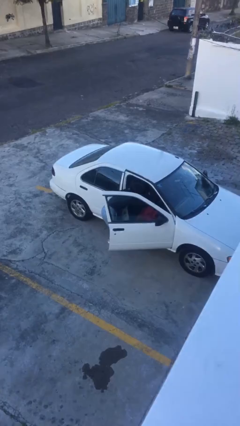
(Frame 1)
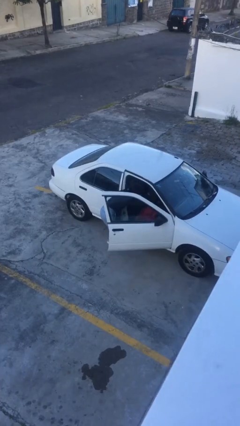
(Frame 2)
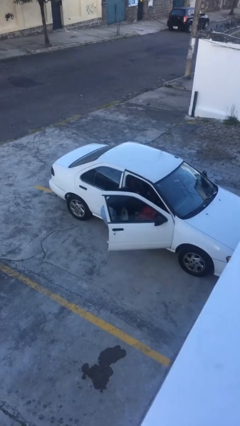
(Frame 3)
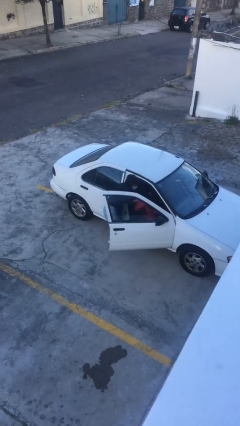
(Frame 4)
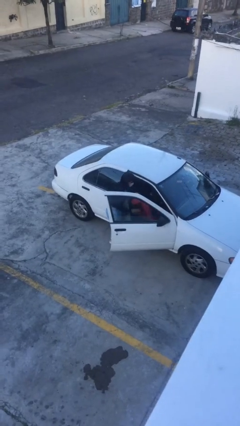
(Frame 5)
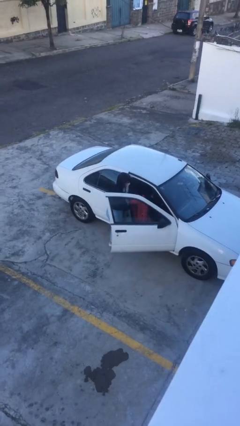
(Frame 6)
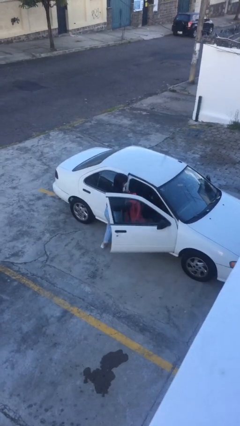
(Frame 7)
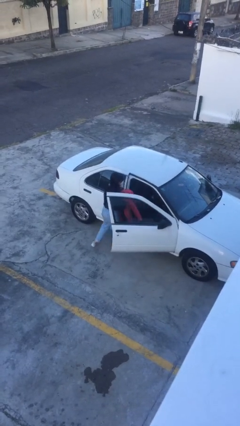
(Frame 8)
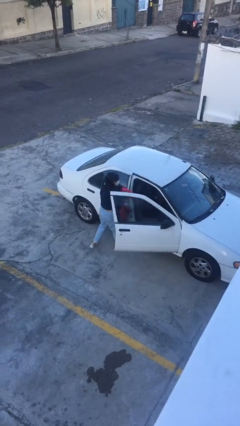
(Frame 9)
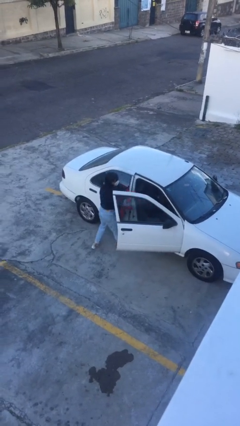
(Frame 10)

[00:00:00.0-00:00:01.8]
person unloads car

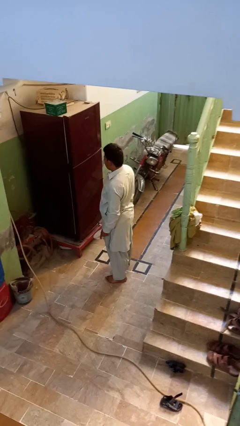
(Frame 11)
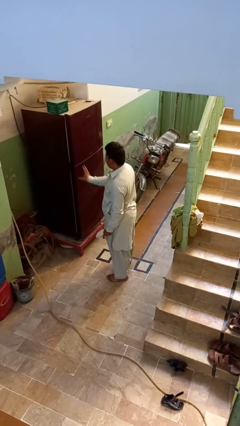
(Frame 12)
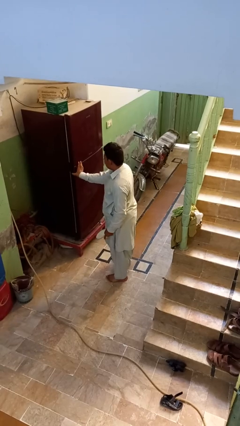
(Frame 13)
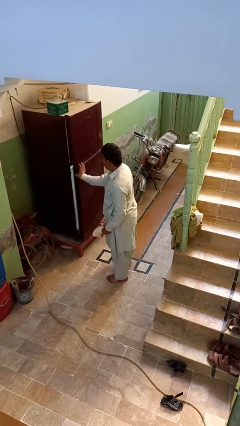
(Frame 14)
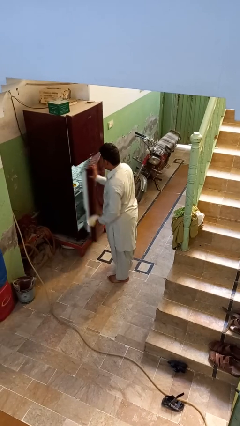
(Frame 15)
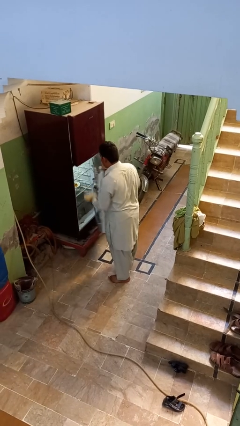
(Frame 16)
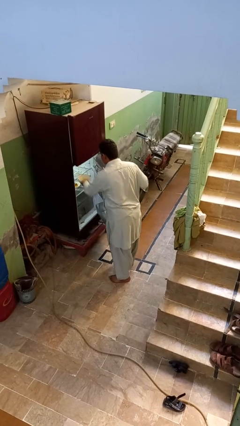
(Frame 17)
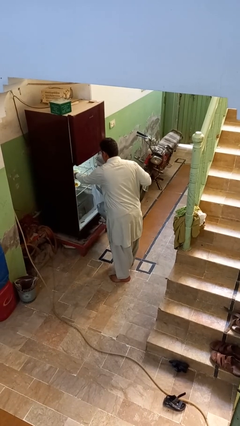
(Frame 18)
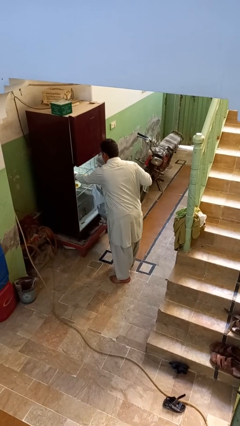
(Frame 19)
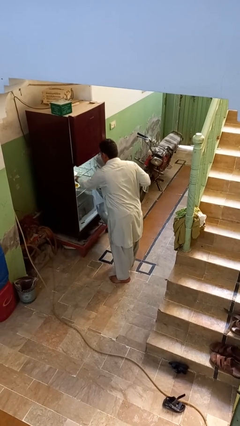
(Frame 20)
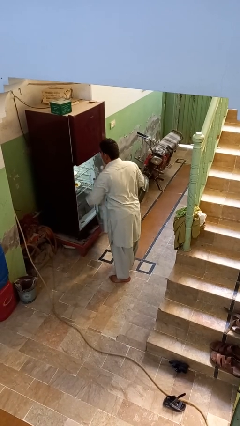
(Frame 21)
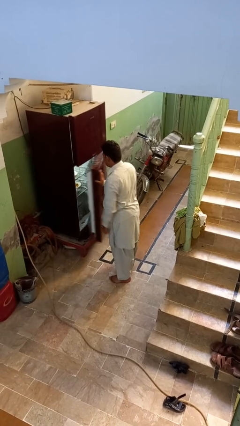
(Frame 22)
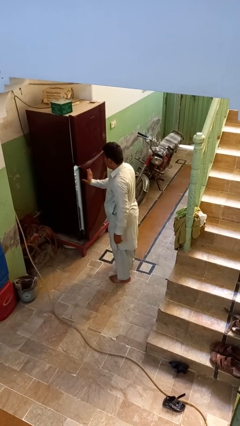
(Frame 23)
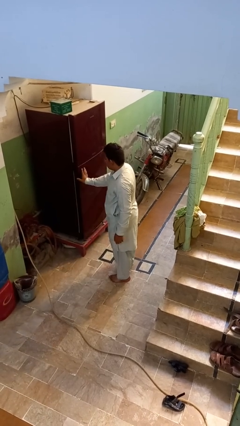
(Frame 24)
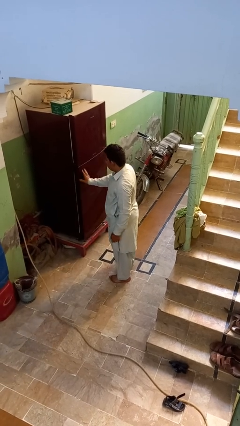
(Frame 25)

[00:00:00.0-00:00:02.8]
person puts object into refrigerator

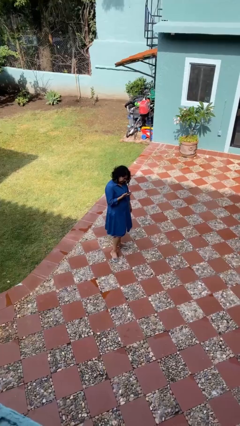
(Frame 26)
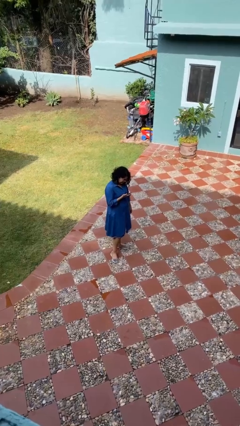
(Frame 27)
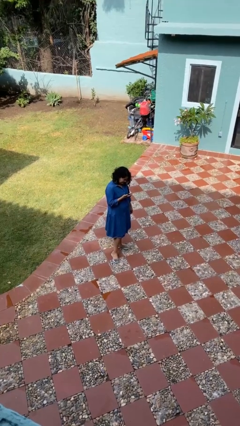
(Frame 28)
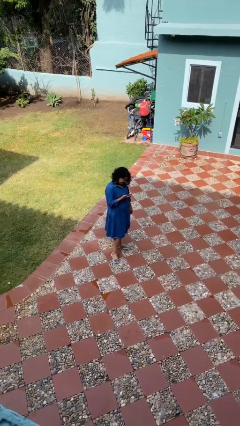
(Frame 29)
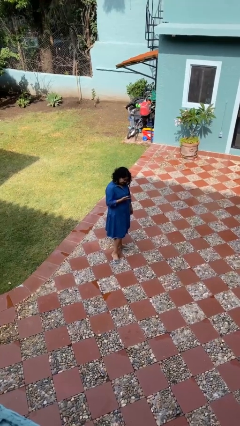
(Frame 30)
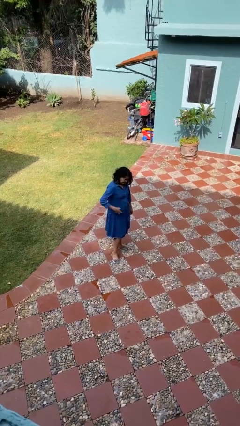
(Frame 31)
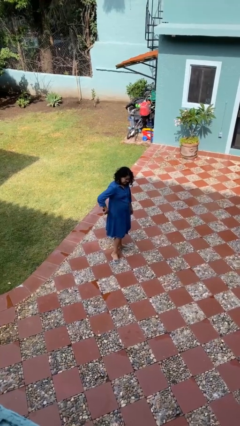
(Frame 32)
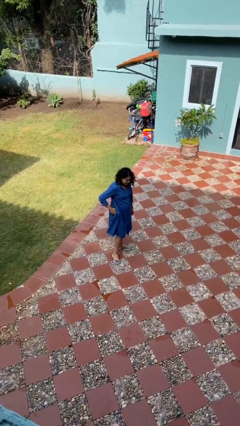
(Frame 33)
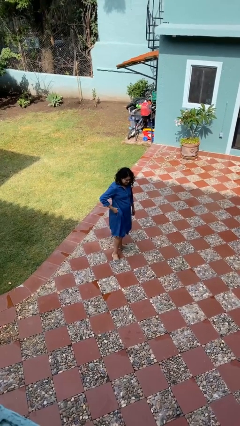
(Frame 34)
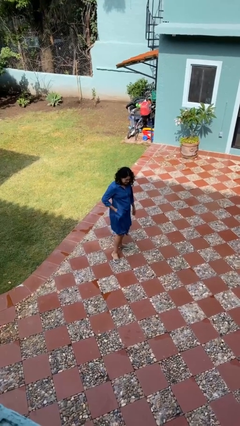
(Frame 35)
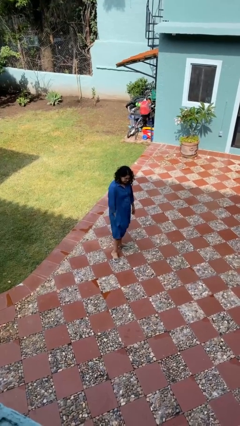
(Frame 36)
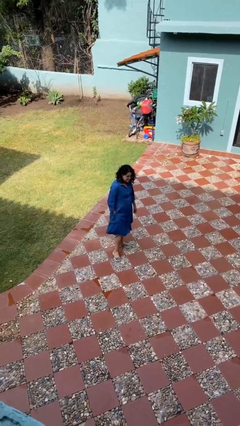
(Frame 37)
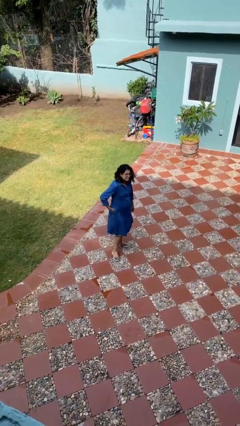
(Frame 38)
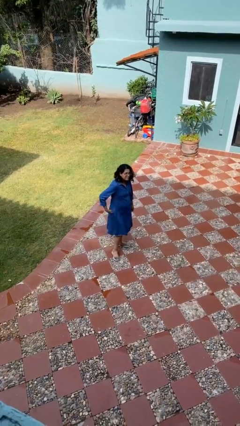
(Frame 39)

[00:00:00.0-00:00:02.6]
person puts phone into pocket

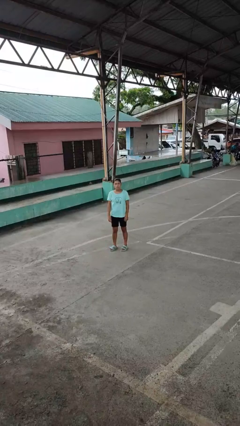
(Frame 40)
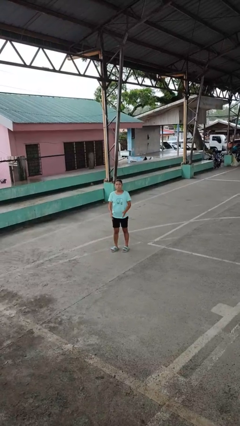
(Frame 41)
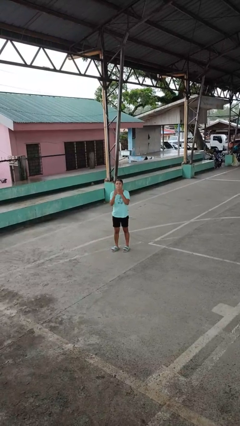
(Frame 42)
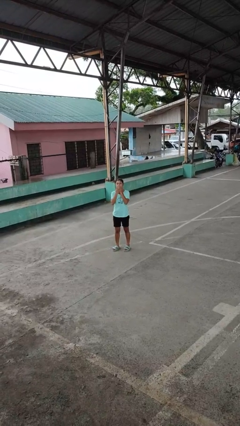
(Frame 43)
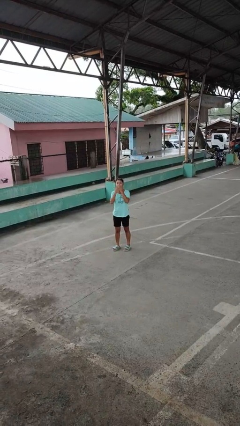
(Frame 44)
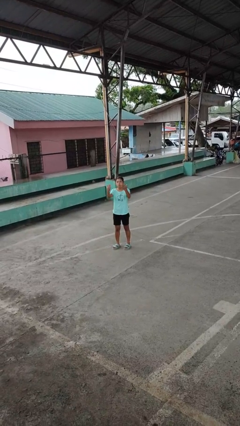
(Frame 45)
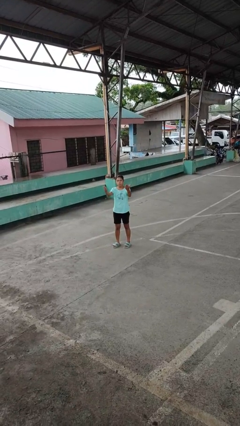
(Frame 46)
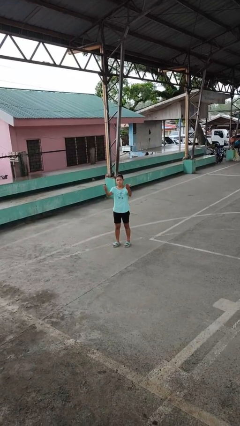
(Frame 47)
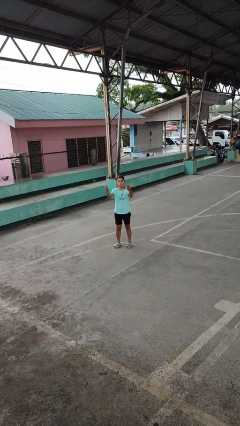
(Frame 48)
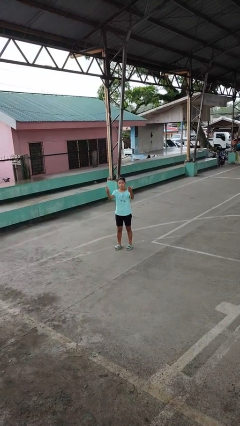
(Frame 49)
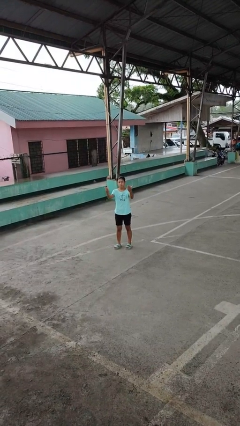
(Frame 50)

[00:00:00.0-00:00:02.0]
person gestures blow kiss

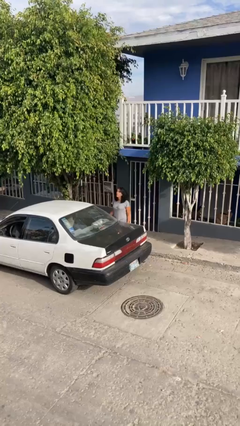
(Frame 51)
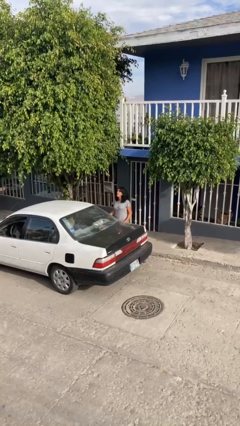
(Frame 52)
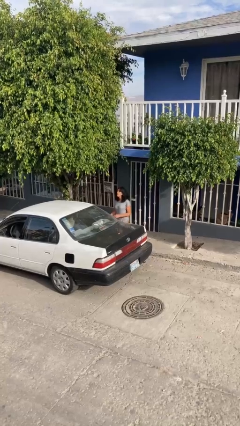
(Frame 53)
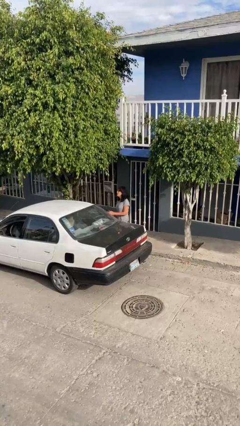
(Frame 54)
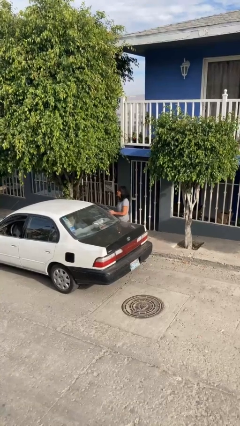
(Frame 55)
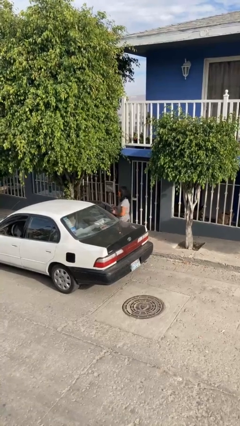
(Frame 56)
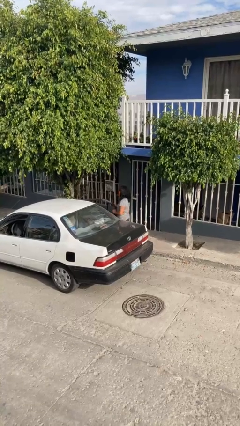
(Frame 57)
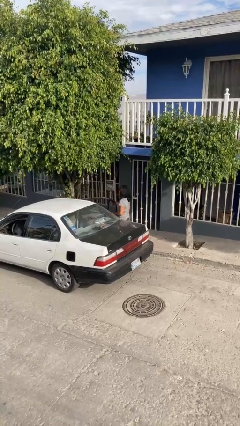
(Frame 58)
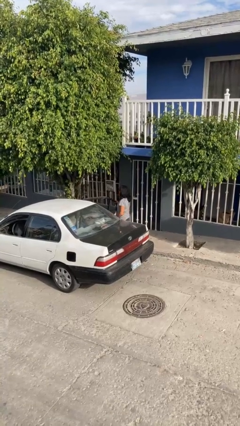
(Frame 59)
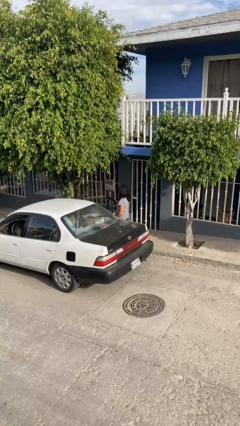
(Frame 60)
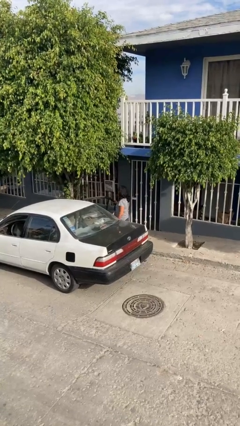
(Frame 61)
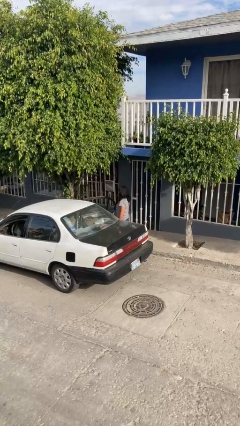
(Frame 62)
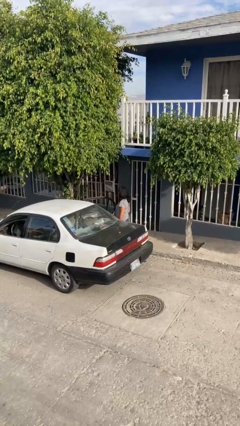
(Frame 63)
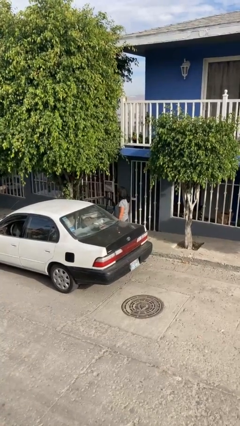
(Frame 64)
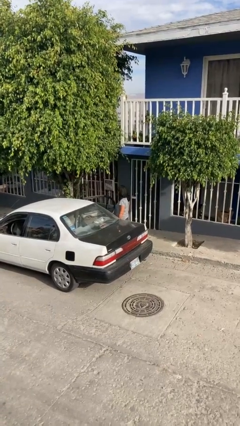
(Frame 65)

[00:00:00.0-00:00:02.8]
person opens car door

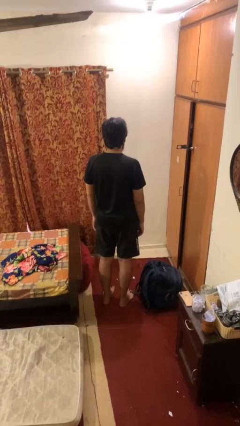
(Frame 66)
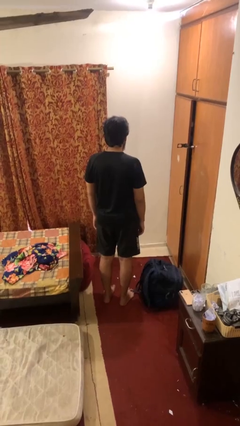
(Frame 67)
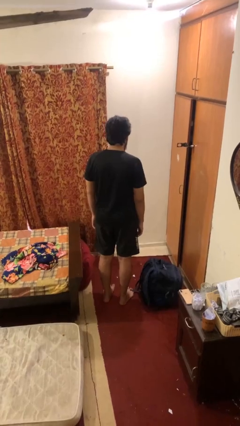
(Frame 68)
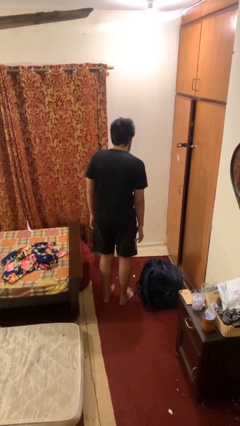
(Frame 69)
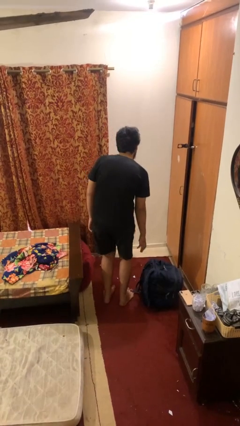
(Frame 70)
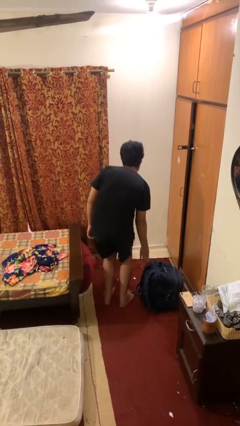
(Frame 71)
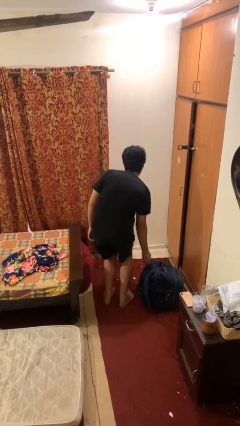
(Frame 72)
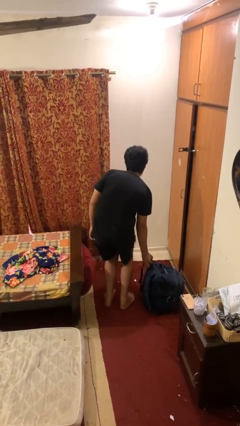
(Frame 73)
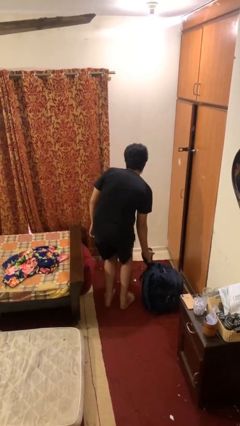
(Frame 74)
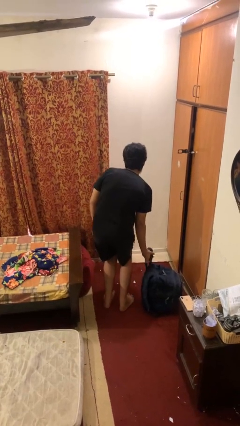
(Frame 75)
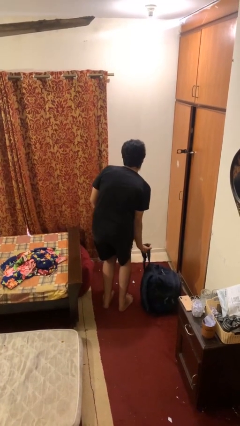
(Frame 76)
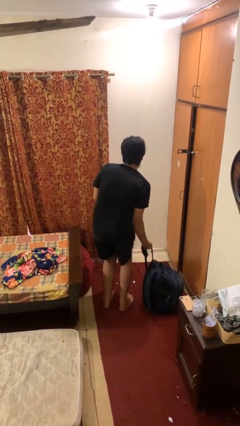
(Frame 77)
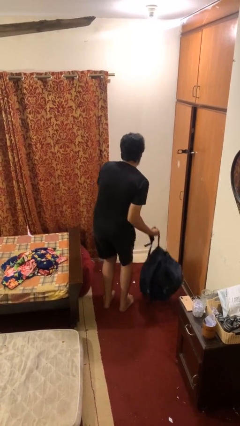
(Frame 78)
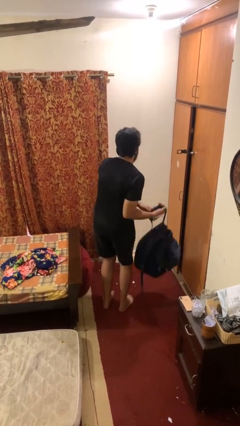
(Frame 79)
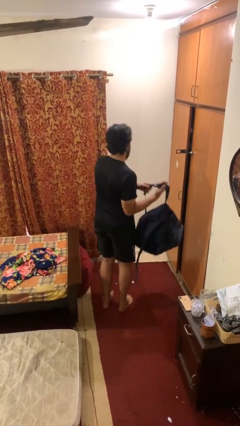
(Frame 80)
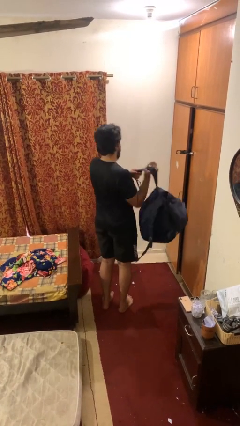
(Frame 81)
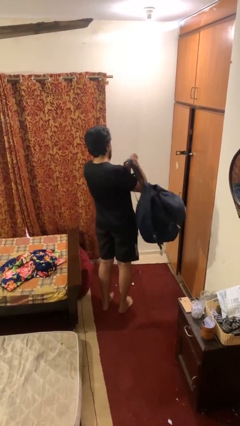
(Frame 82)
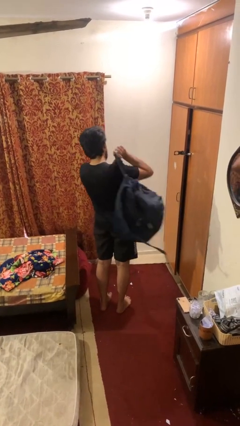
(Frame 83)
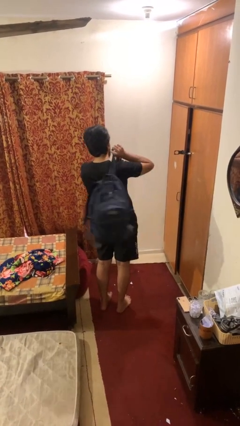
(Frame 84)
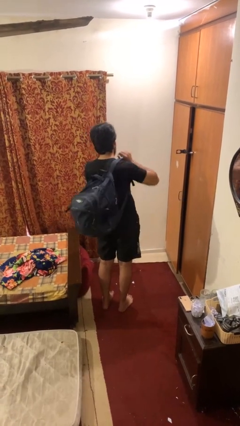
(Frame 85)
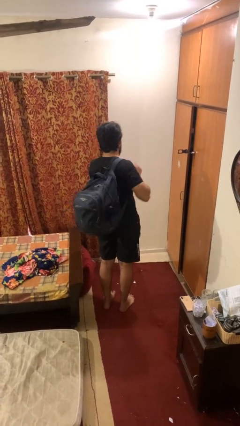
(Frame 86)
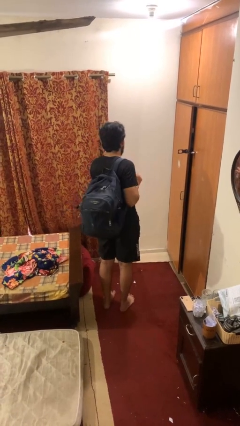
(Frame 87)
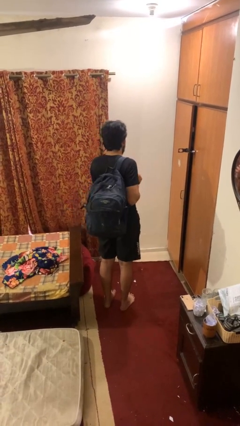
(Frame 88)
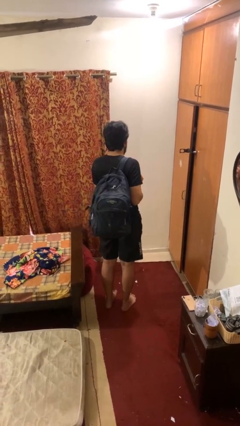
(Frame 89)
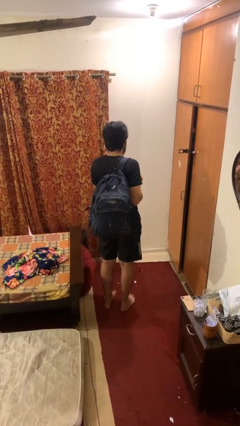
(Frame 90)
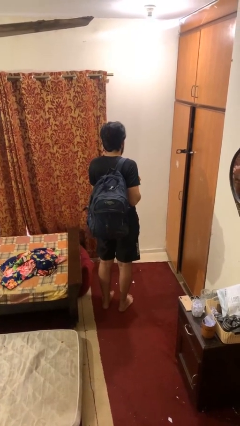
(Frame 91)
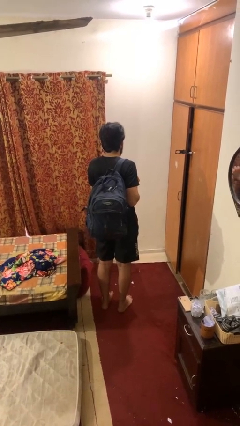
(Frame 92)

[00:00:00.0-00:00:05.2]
person puts on backpack

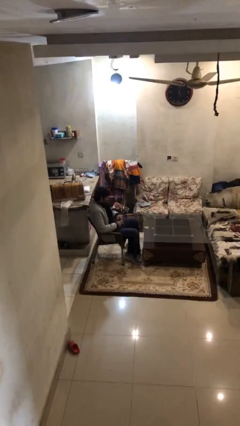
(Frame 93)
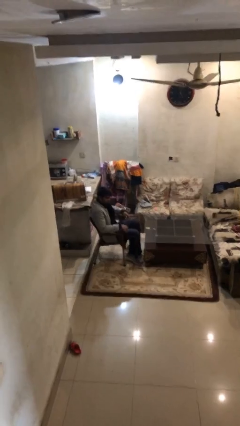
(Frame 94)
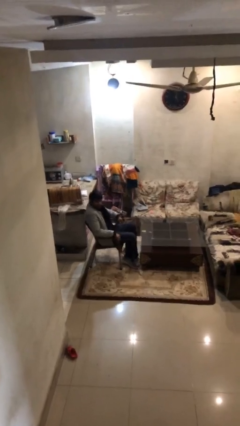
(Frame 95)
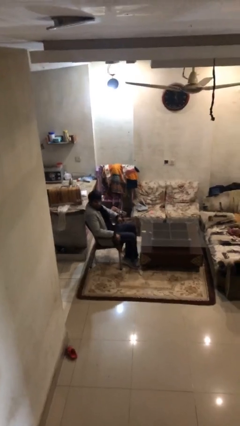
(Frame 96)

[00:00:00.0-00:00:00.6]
person stands up
